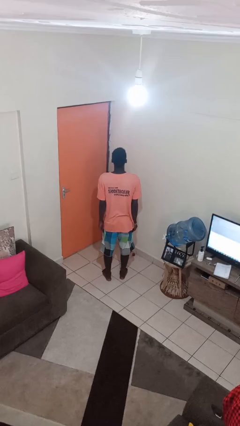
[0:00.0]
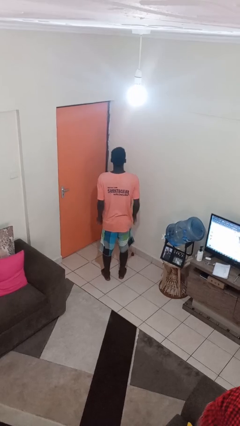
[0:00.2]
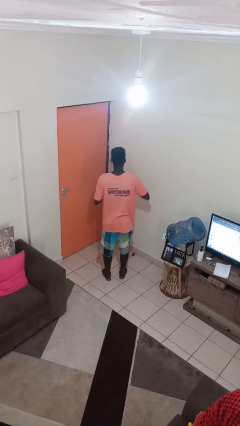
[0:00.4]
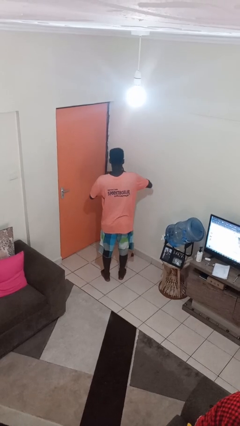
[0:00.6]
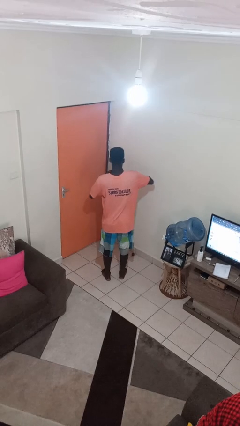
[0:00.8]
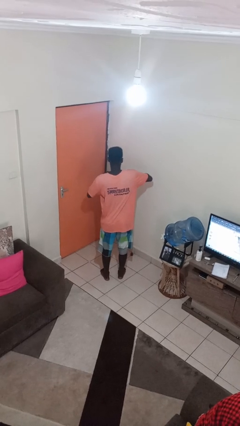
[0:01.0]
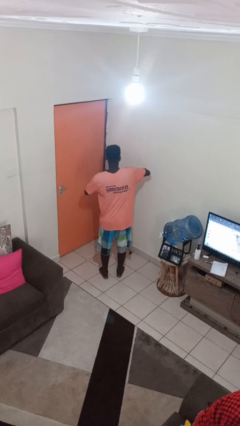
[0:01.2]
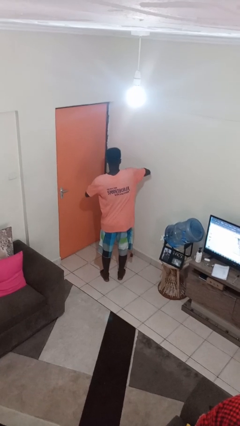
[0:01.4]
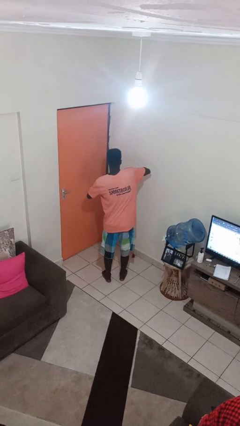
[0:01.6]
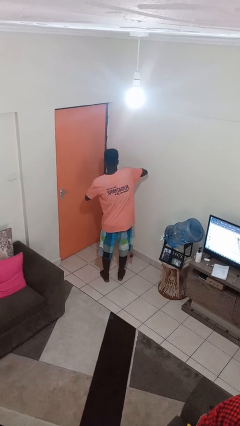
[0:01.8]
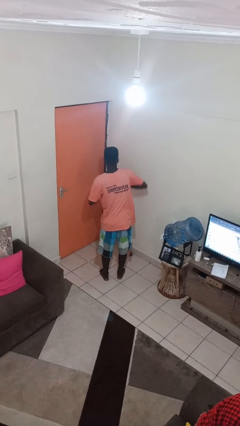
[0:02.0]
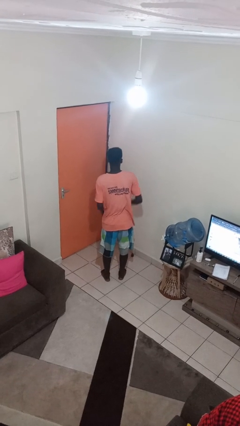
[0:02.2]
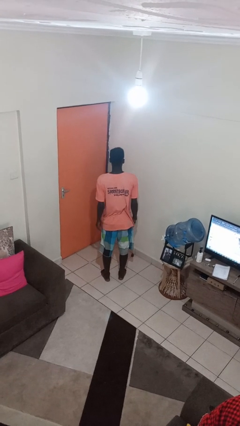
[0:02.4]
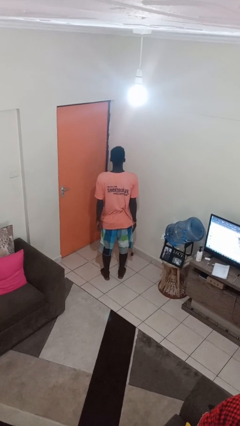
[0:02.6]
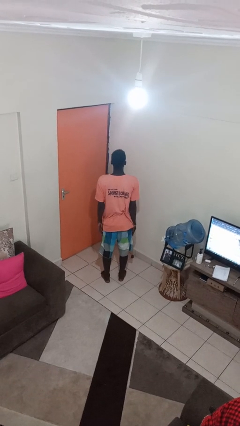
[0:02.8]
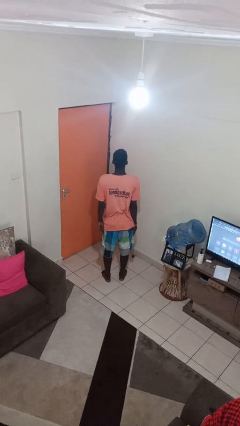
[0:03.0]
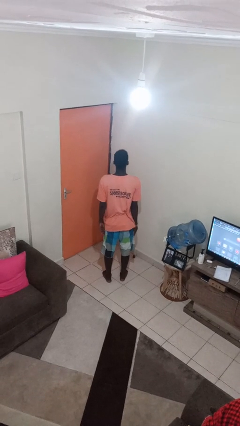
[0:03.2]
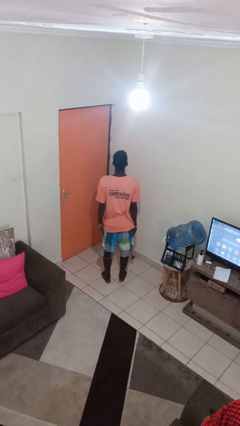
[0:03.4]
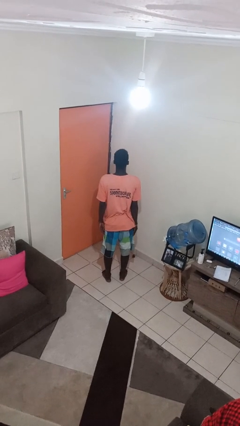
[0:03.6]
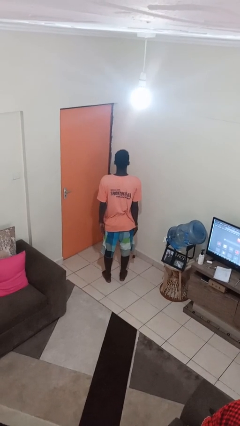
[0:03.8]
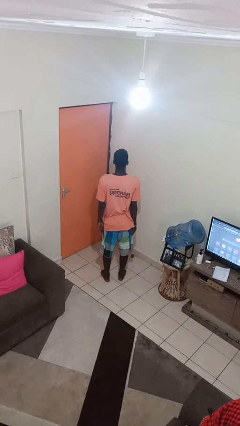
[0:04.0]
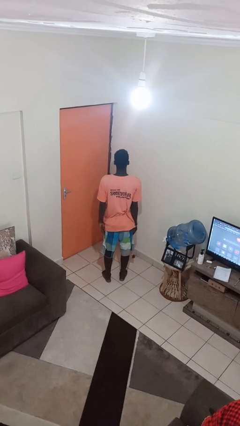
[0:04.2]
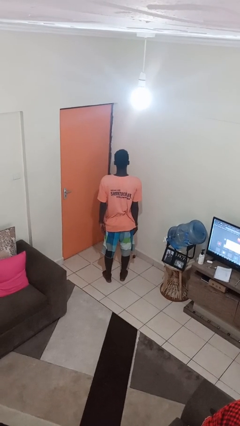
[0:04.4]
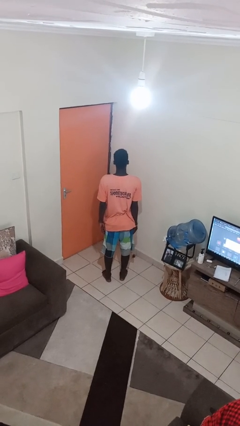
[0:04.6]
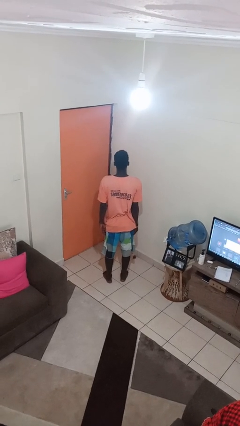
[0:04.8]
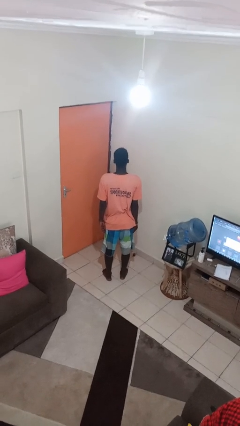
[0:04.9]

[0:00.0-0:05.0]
person puts on ring

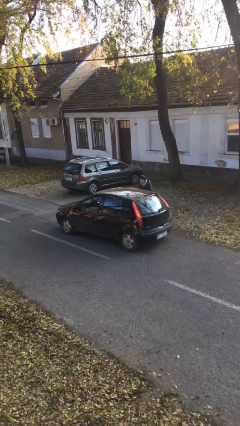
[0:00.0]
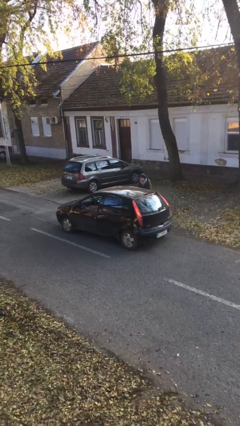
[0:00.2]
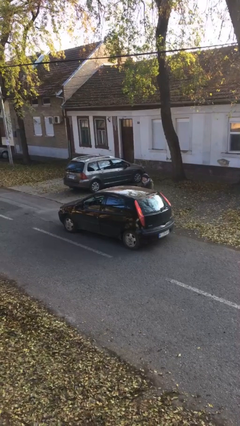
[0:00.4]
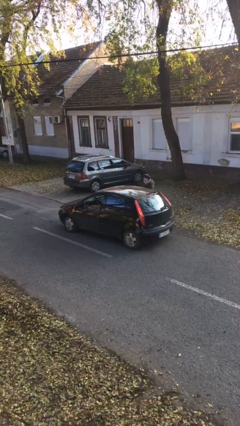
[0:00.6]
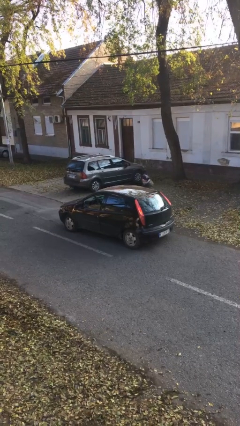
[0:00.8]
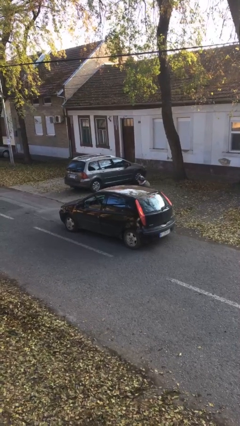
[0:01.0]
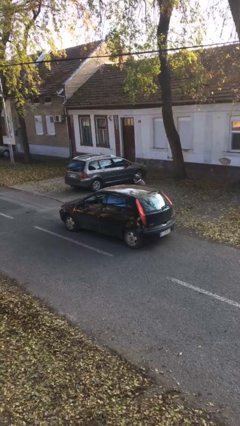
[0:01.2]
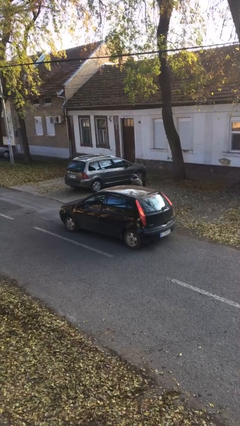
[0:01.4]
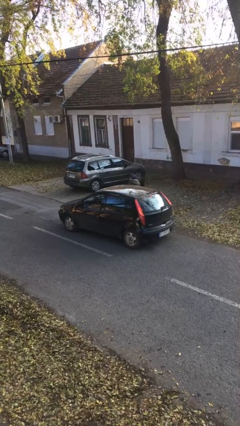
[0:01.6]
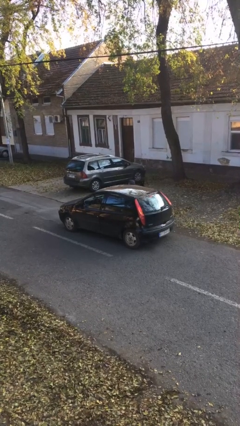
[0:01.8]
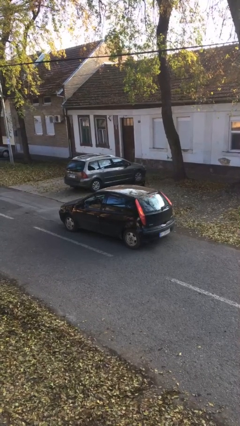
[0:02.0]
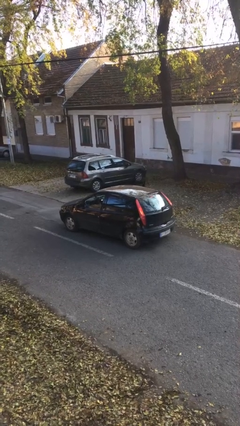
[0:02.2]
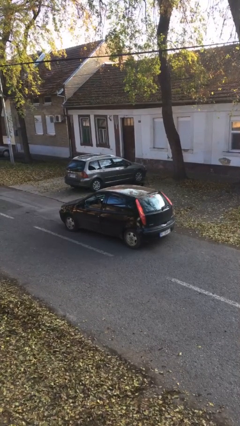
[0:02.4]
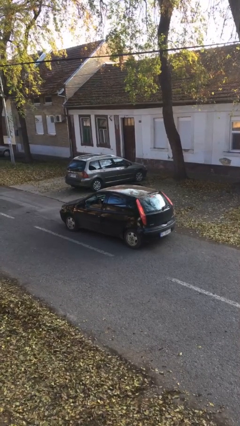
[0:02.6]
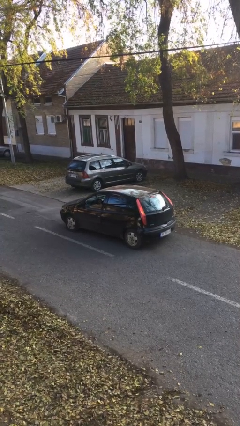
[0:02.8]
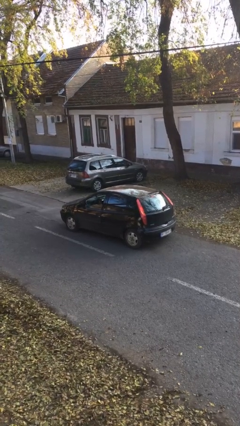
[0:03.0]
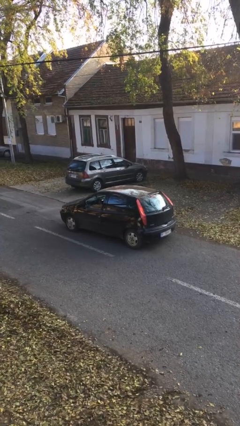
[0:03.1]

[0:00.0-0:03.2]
car picks up person

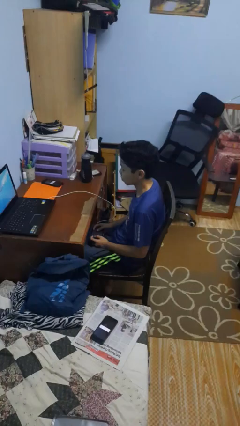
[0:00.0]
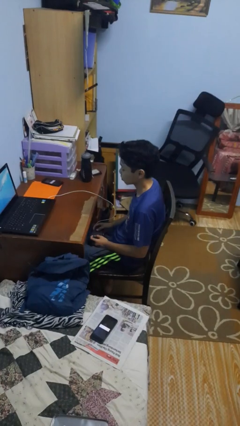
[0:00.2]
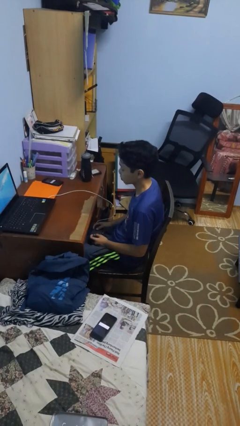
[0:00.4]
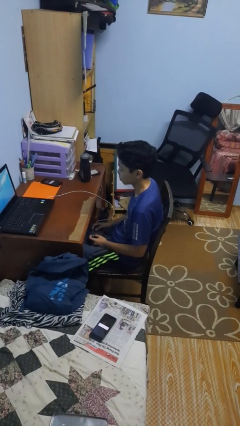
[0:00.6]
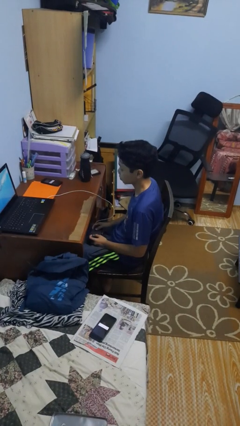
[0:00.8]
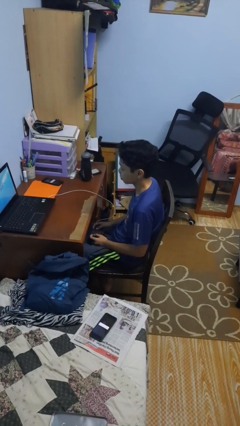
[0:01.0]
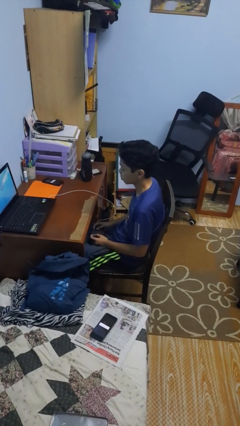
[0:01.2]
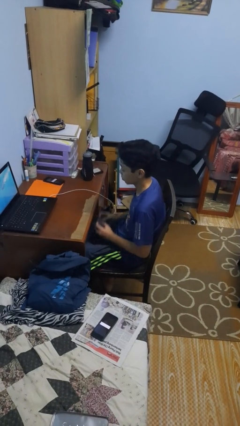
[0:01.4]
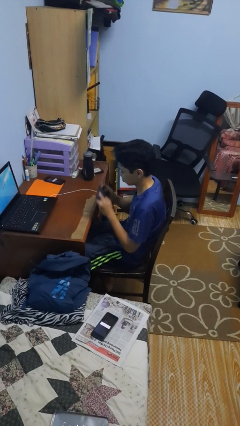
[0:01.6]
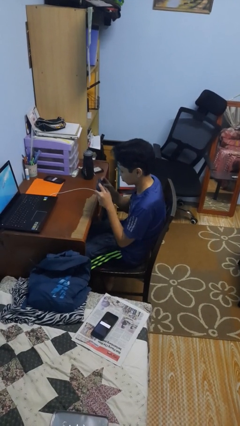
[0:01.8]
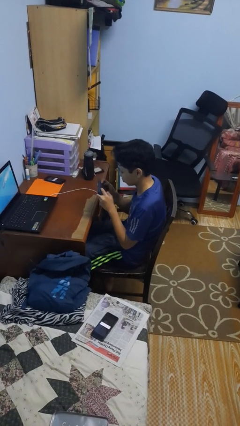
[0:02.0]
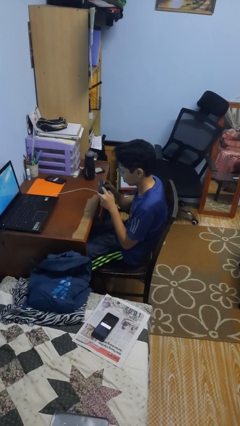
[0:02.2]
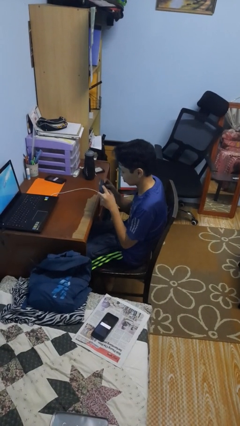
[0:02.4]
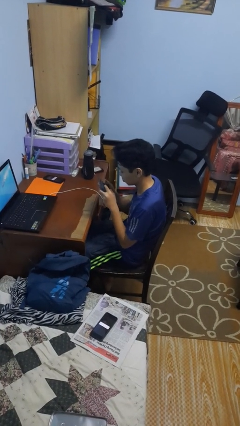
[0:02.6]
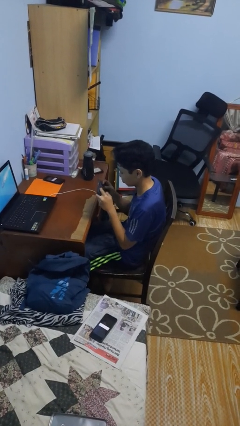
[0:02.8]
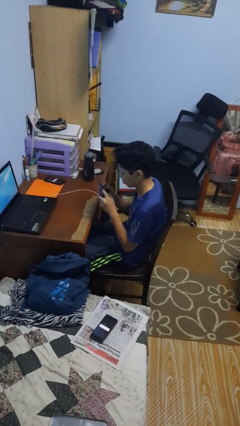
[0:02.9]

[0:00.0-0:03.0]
person interacts with handheld game

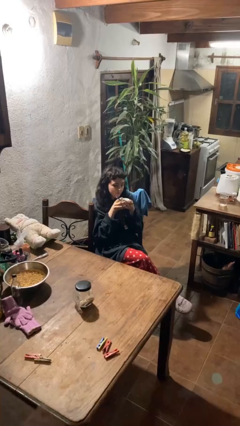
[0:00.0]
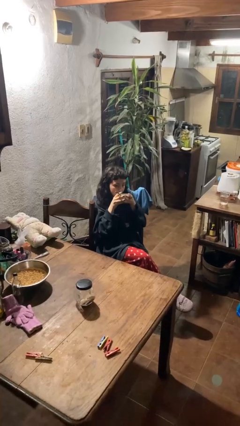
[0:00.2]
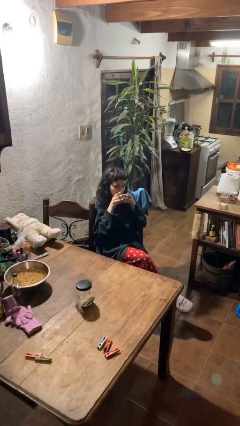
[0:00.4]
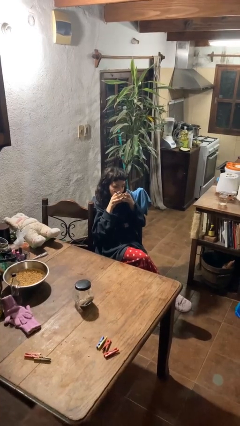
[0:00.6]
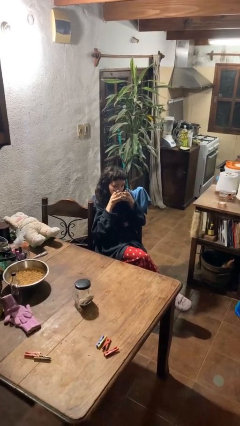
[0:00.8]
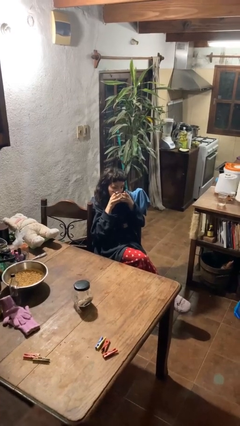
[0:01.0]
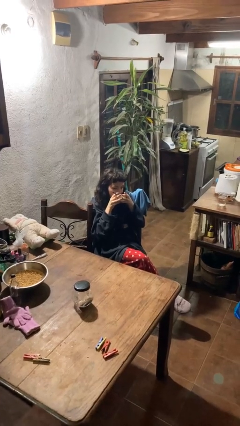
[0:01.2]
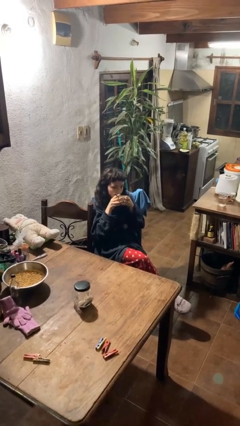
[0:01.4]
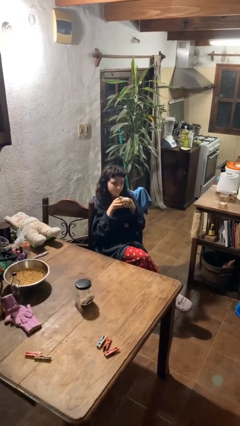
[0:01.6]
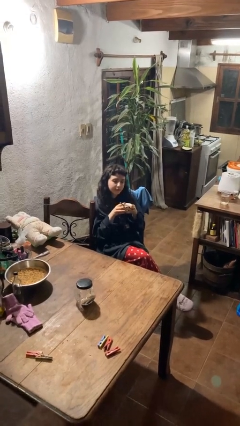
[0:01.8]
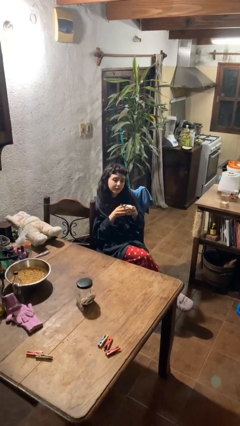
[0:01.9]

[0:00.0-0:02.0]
person drinks from mug

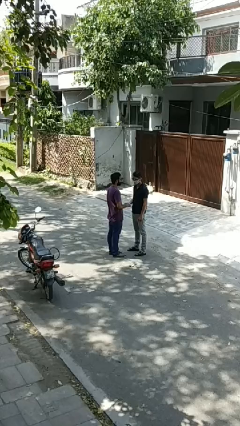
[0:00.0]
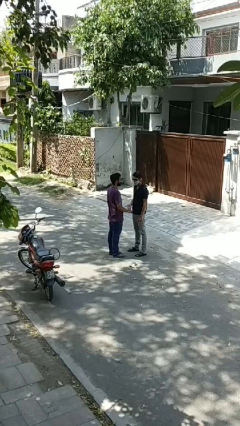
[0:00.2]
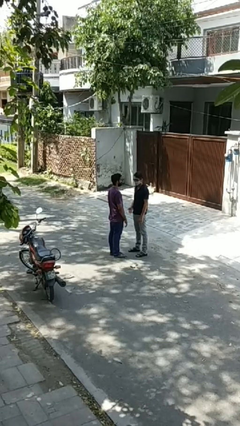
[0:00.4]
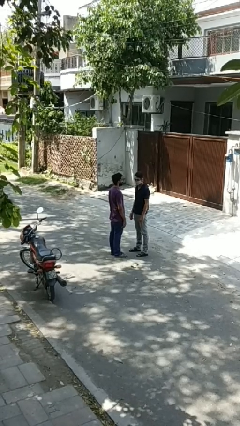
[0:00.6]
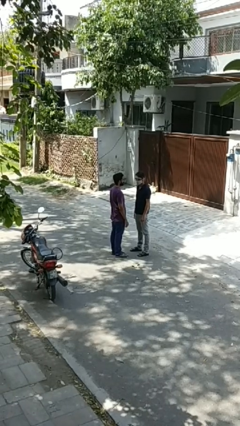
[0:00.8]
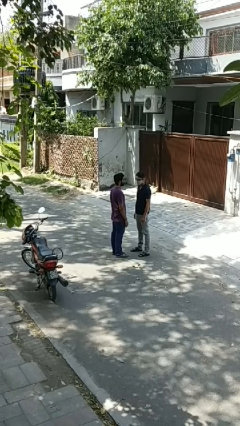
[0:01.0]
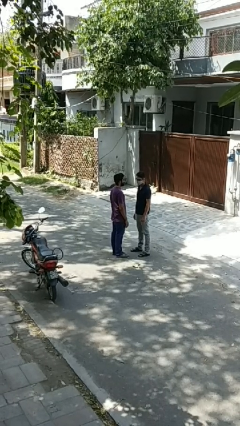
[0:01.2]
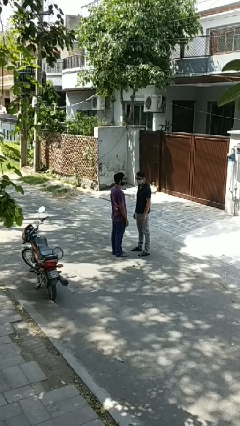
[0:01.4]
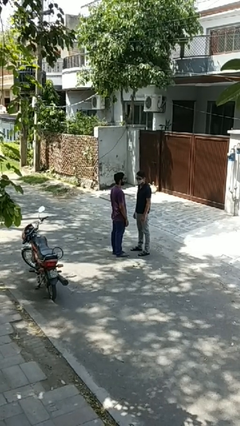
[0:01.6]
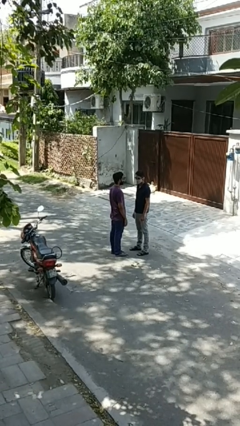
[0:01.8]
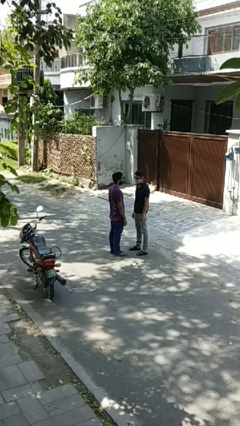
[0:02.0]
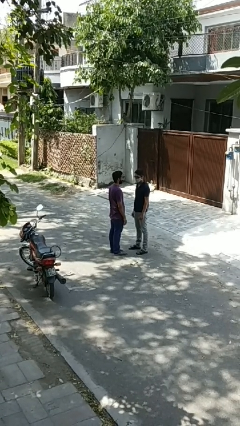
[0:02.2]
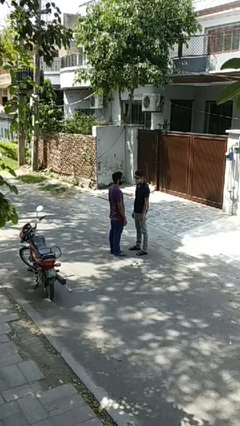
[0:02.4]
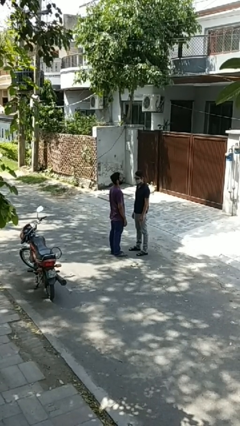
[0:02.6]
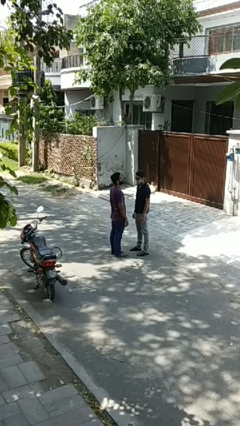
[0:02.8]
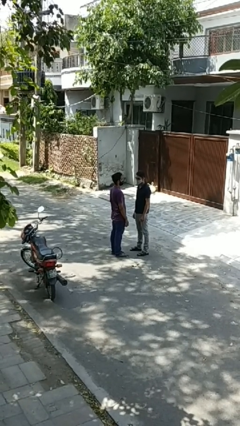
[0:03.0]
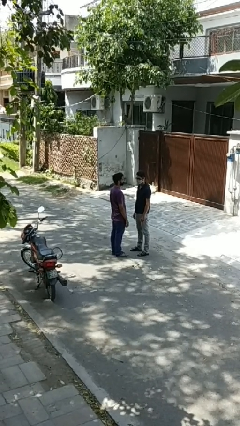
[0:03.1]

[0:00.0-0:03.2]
person highfives hand

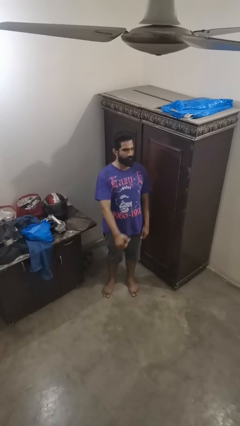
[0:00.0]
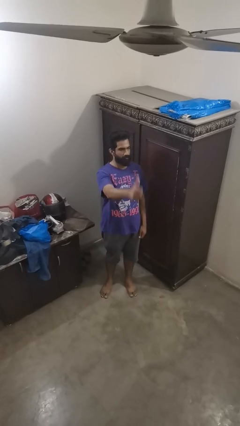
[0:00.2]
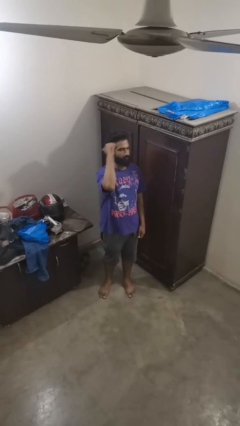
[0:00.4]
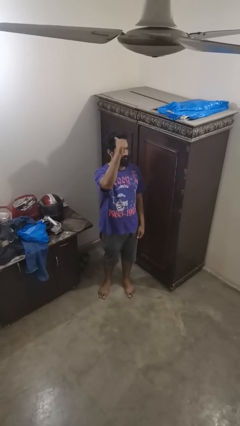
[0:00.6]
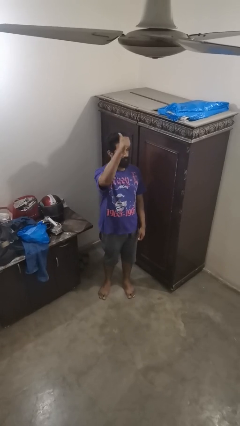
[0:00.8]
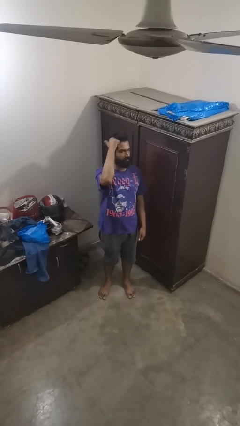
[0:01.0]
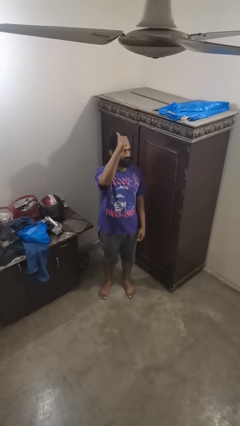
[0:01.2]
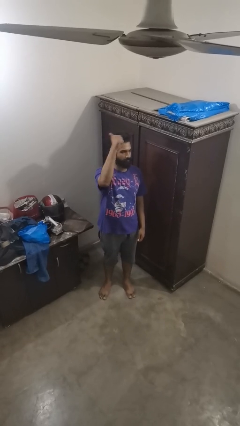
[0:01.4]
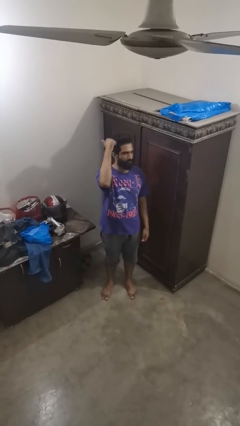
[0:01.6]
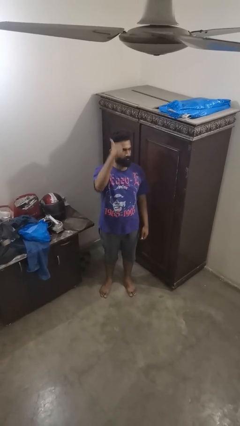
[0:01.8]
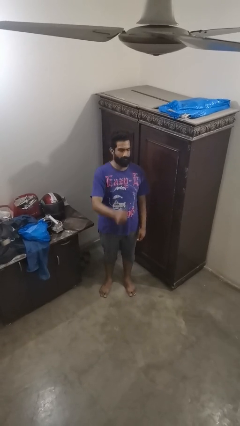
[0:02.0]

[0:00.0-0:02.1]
person gestures behind me
